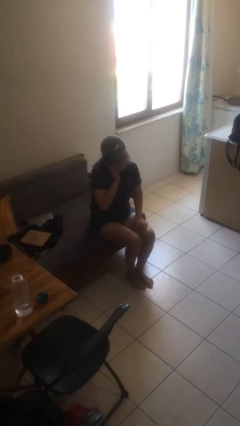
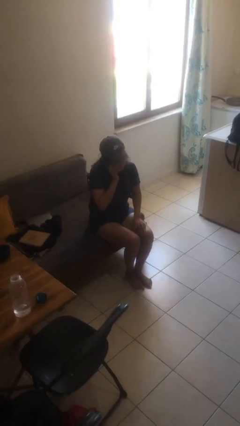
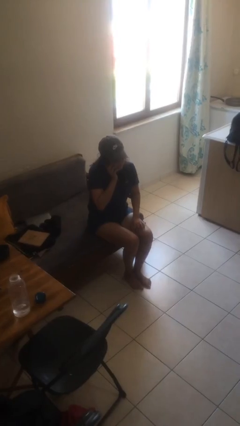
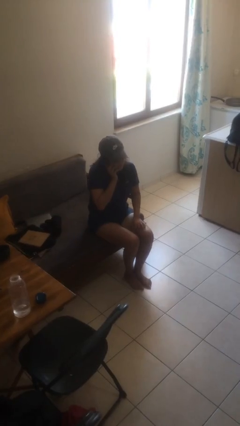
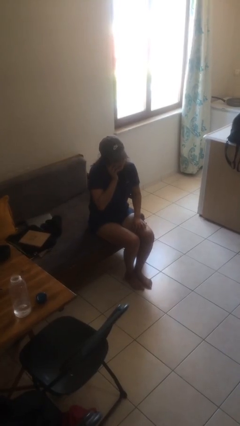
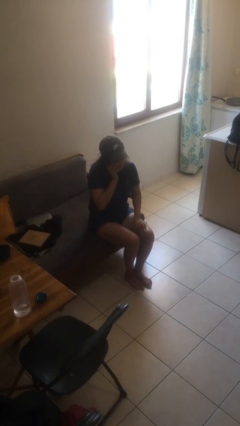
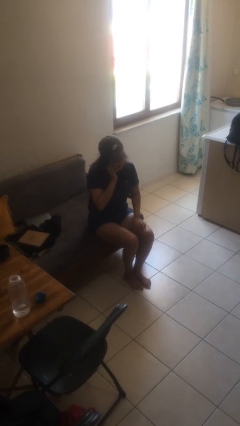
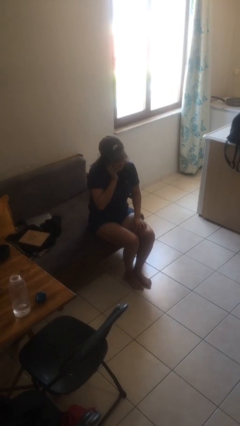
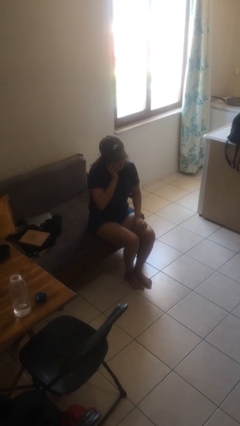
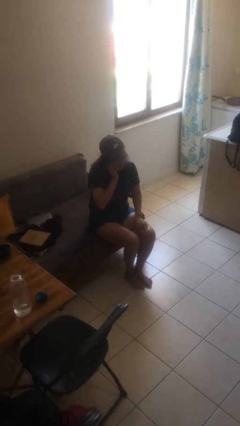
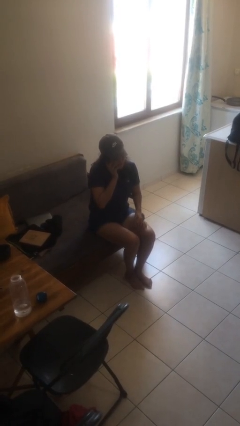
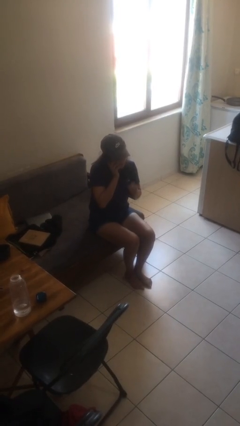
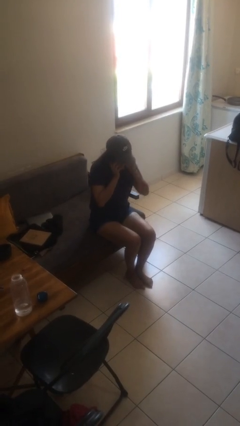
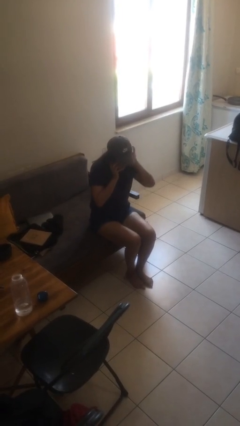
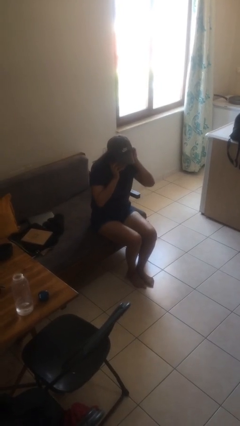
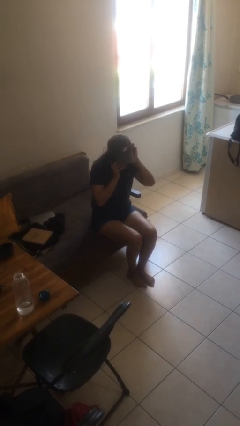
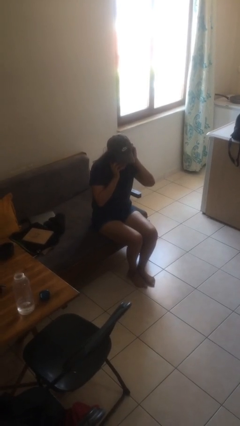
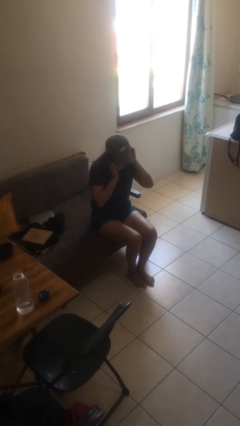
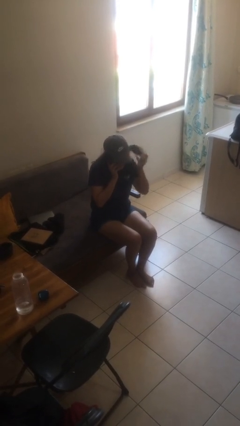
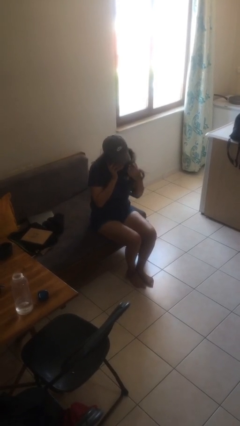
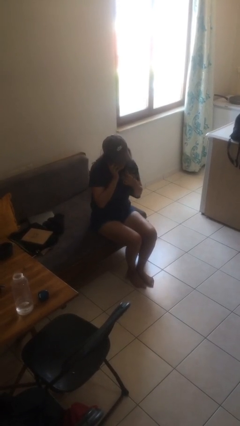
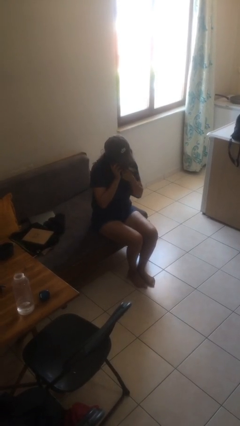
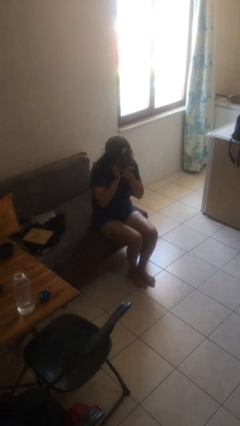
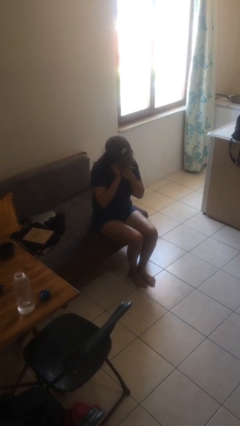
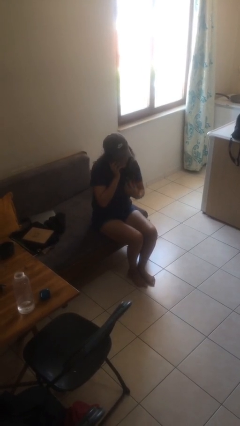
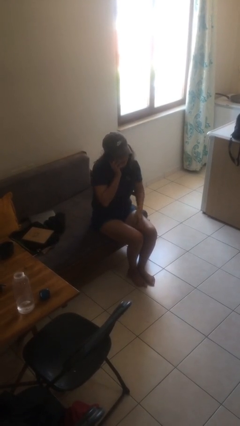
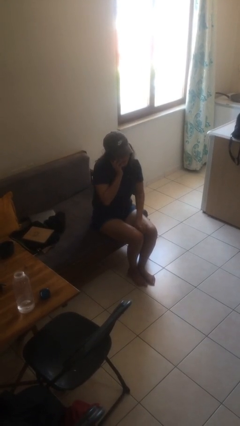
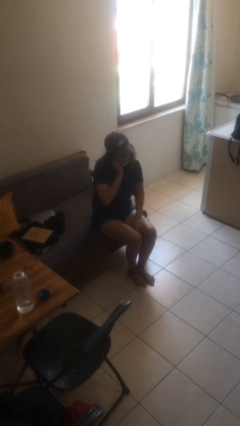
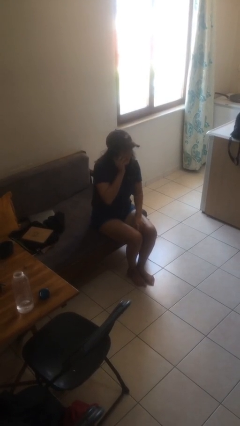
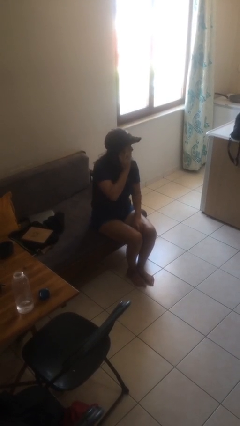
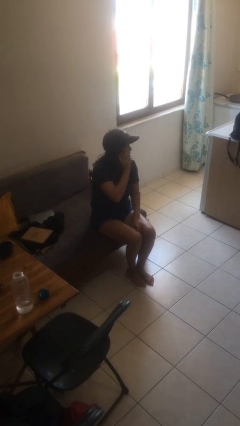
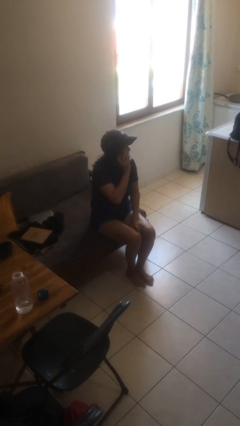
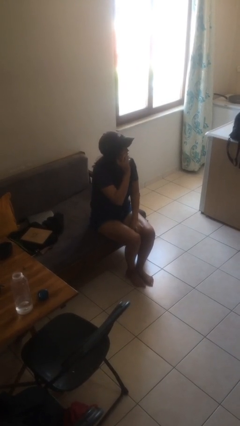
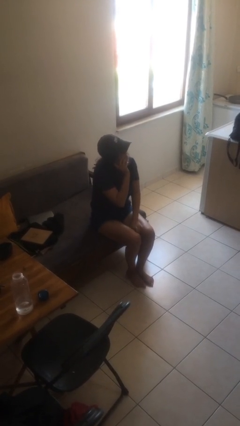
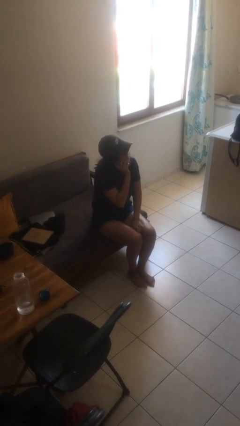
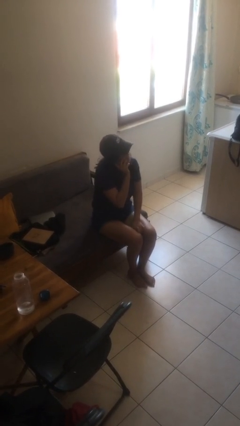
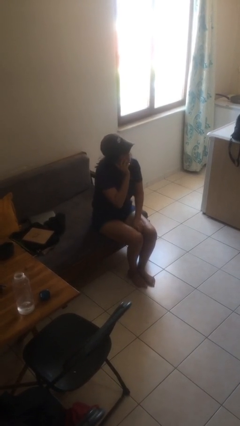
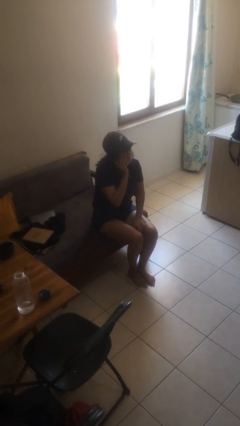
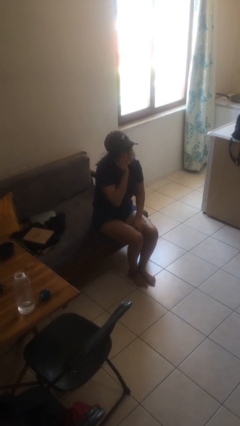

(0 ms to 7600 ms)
person talks on phone

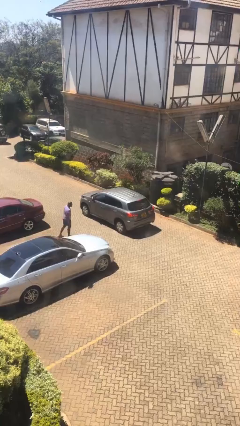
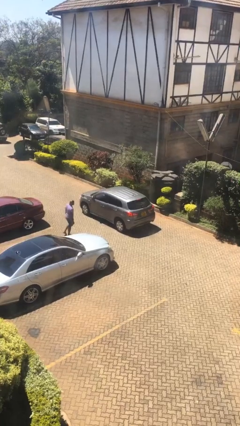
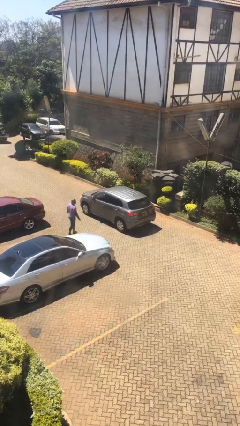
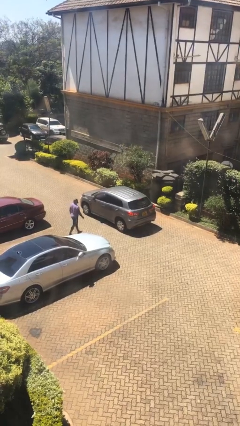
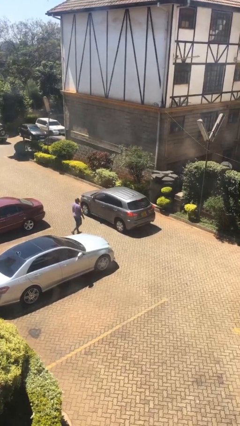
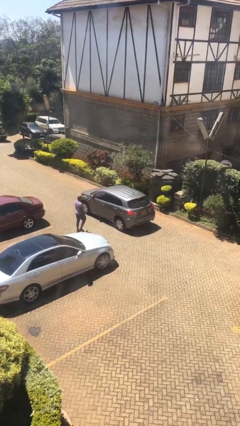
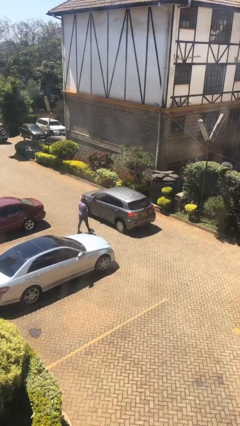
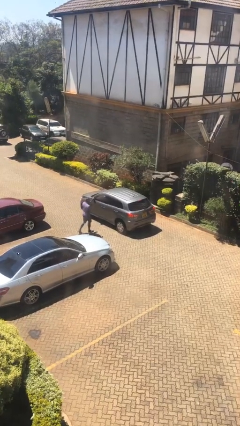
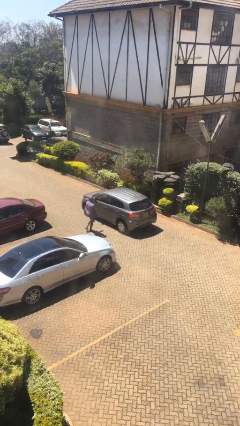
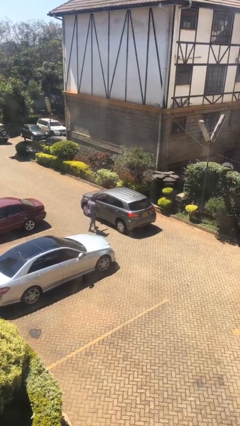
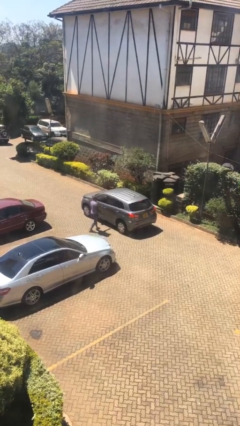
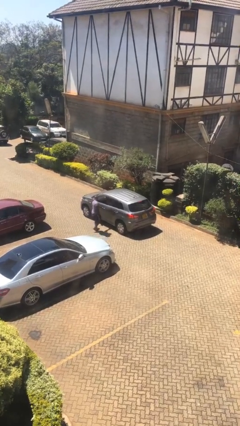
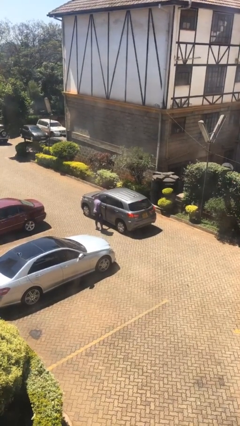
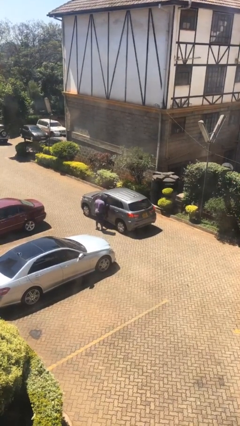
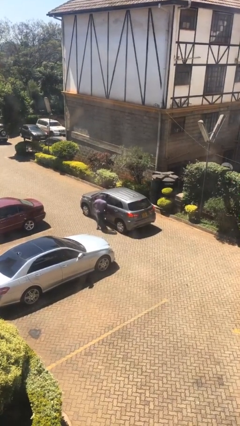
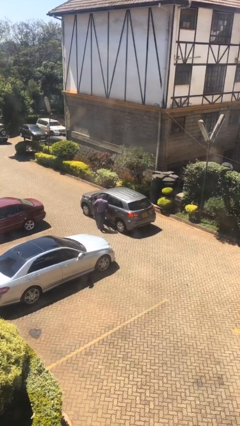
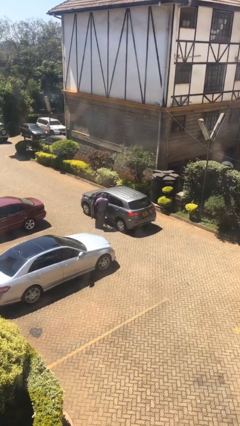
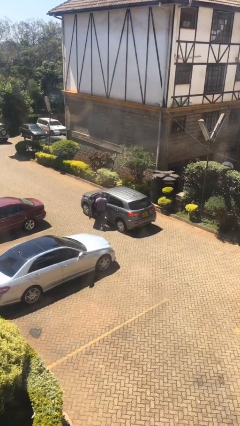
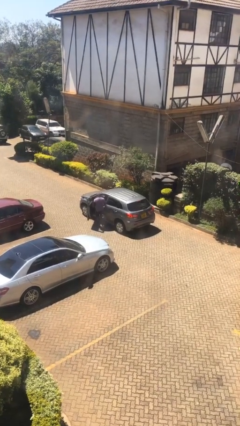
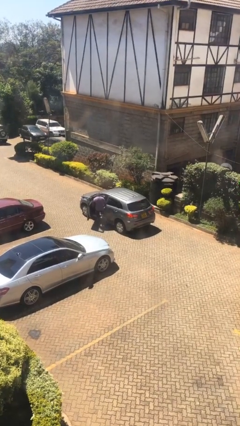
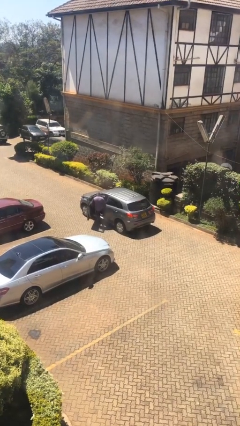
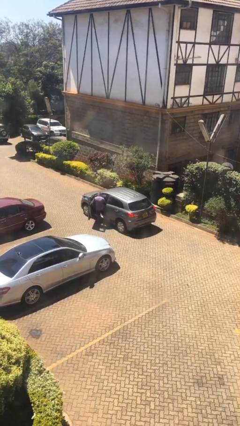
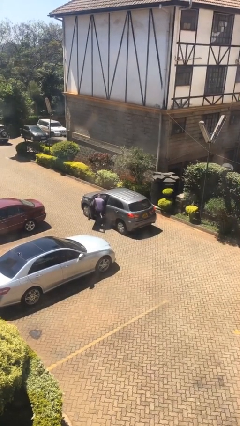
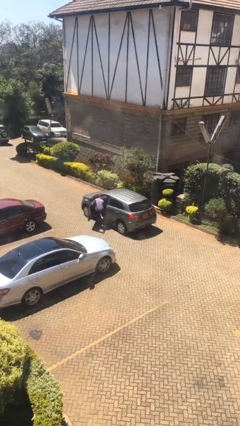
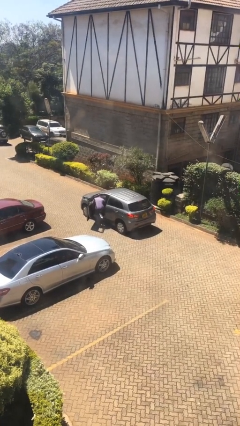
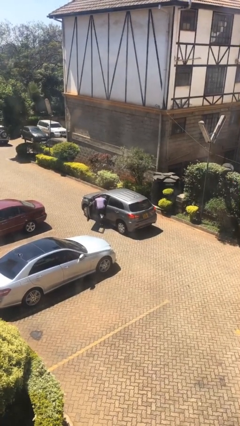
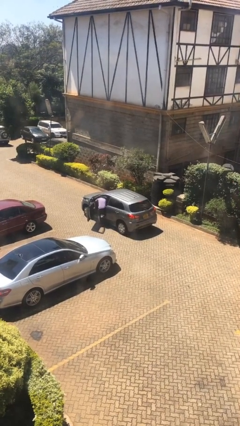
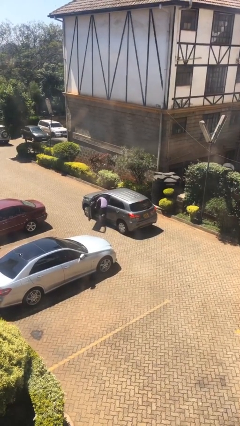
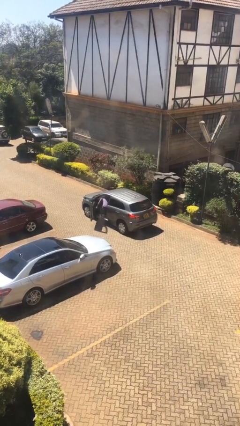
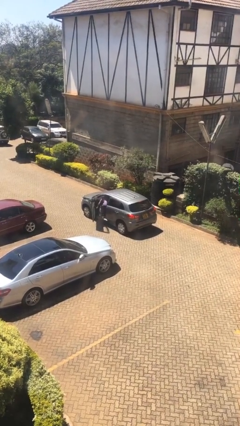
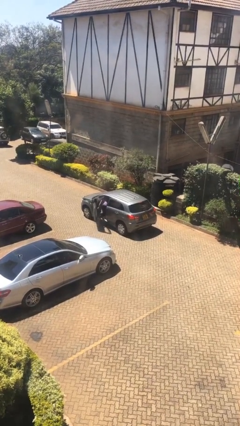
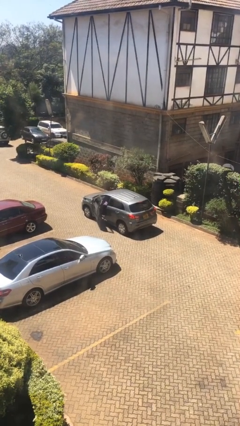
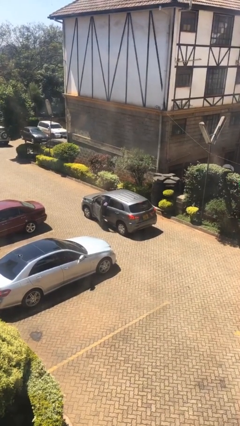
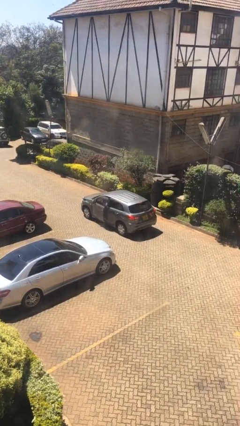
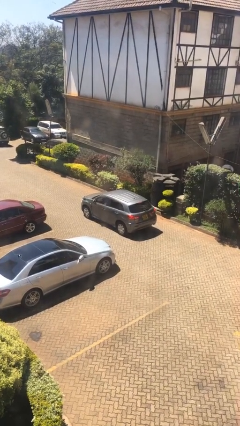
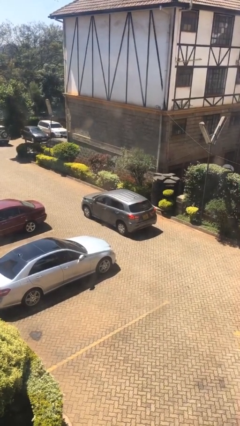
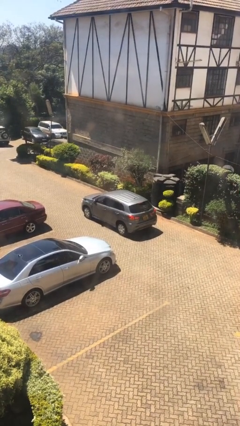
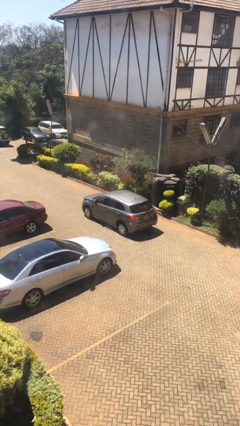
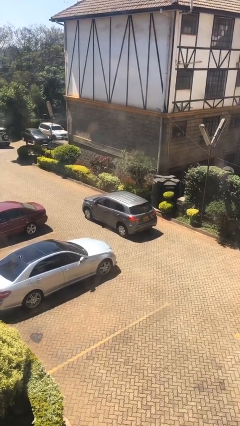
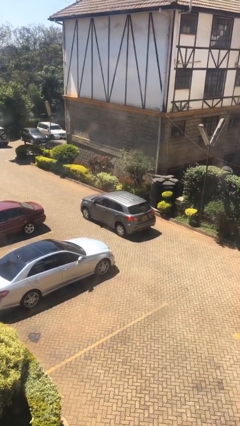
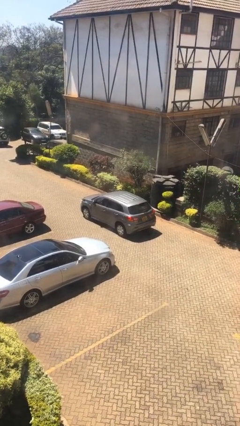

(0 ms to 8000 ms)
car picks up person

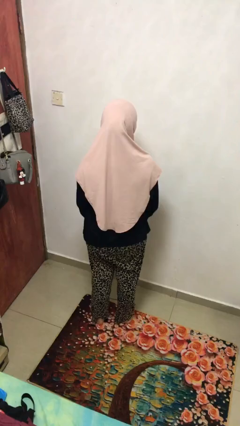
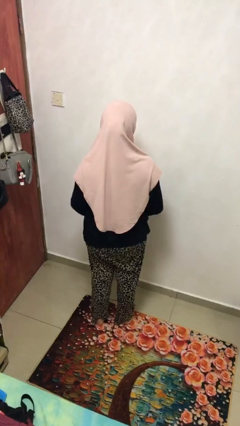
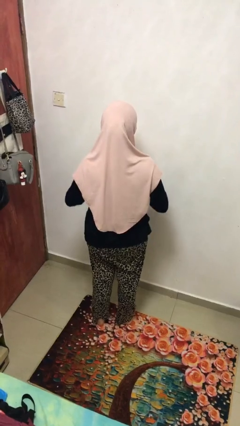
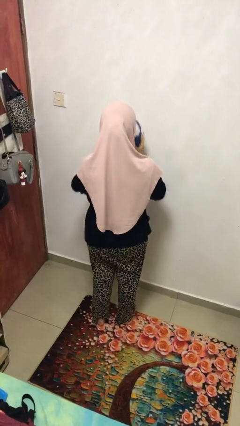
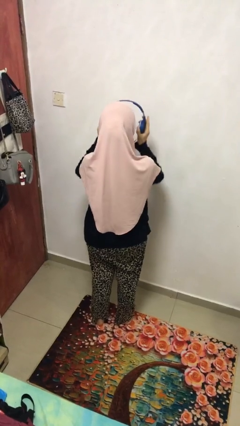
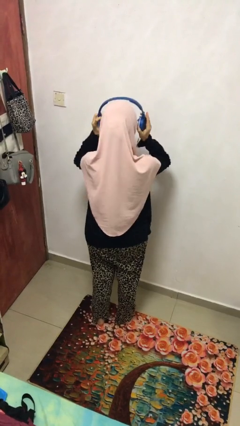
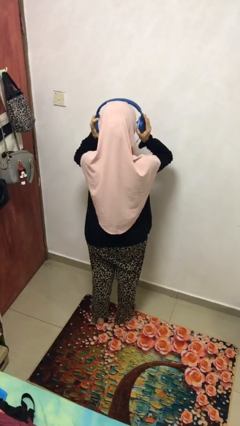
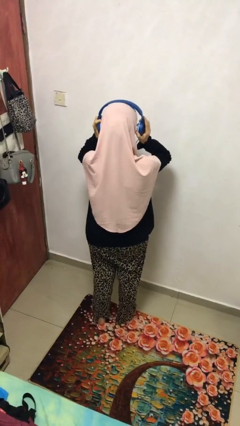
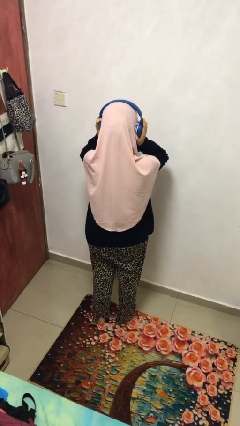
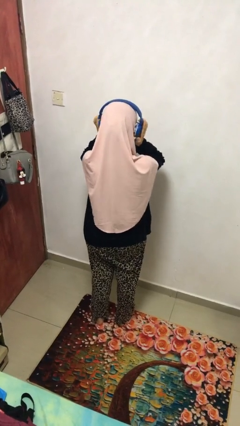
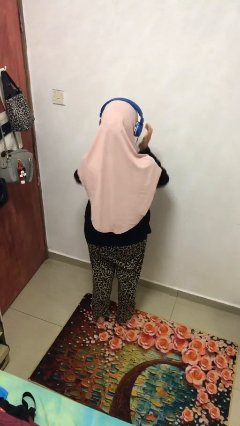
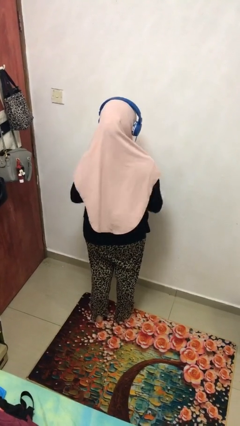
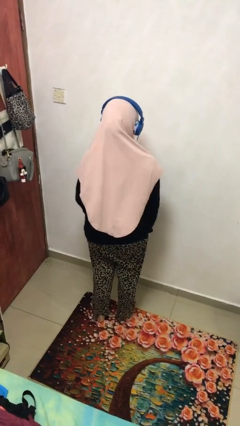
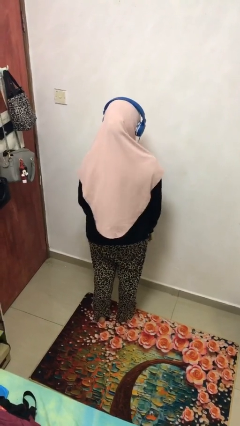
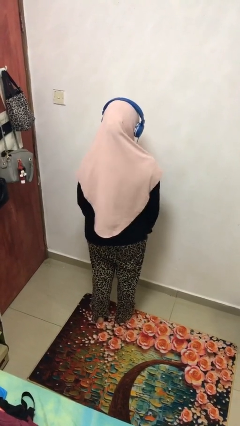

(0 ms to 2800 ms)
person puts on headphones
